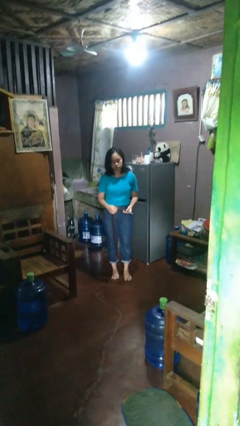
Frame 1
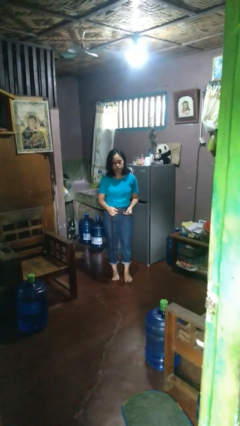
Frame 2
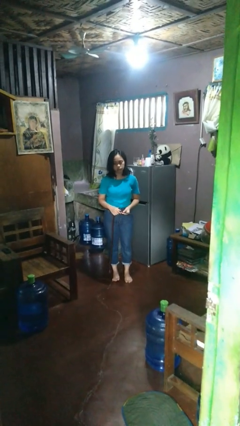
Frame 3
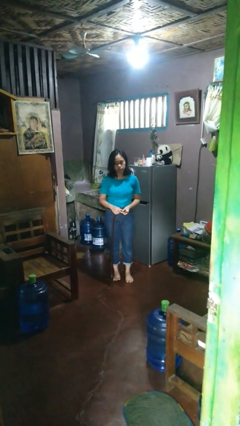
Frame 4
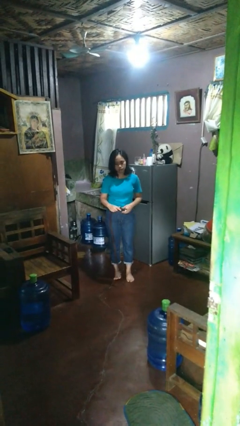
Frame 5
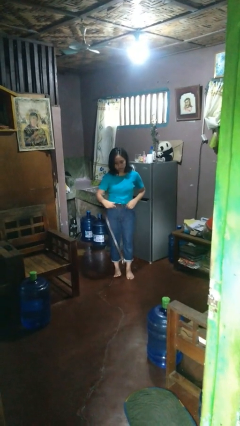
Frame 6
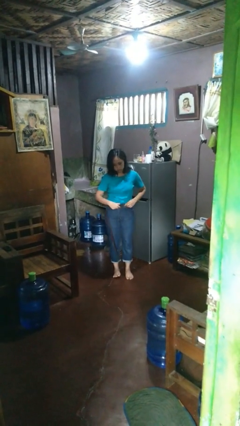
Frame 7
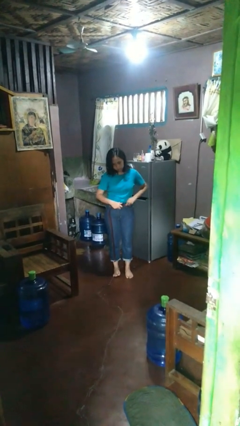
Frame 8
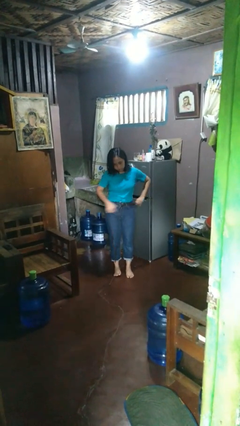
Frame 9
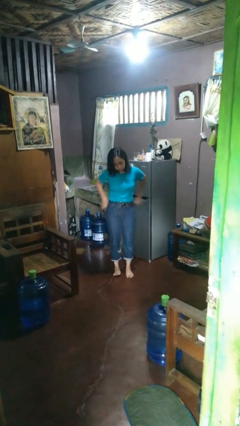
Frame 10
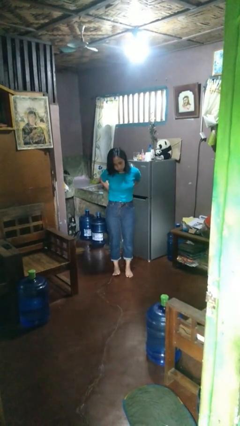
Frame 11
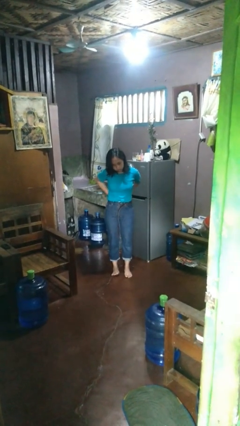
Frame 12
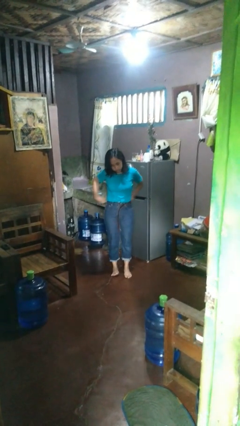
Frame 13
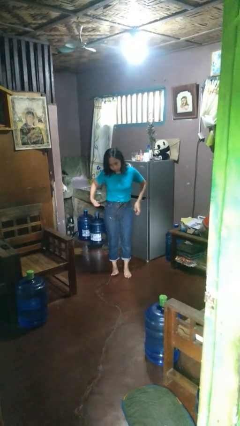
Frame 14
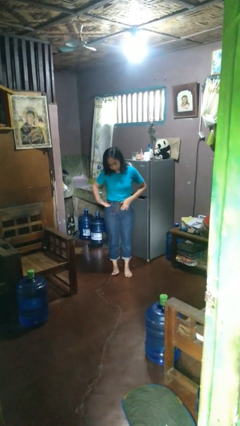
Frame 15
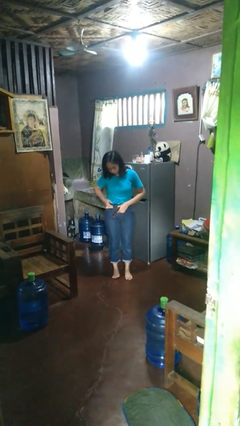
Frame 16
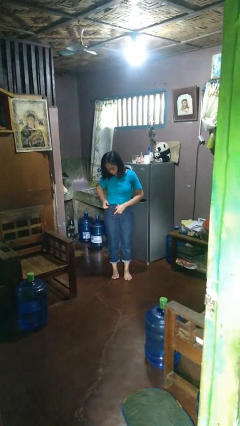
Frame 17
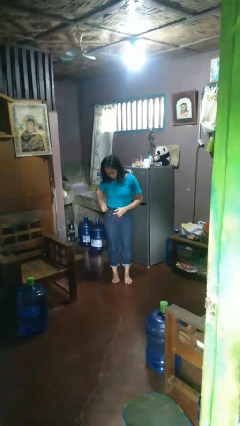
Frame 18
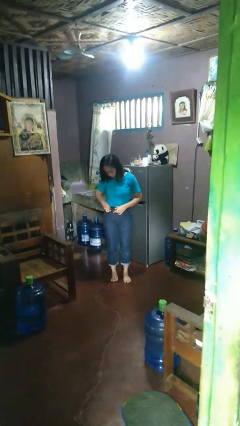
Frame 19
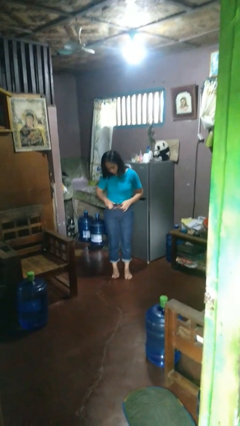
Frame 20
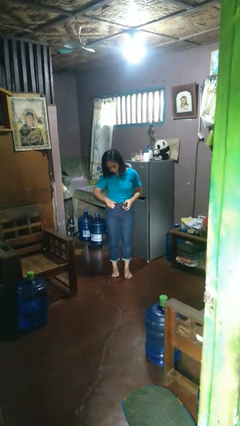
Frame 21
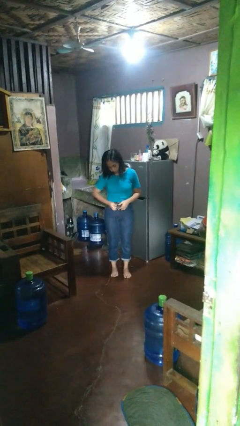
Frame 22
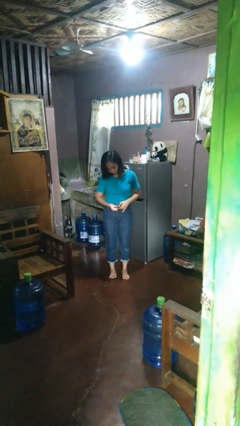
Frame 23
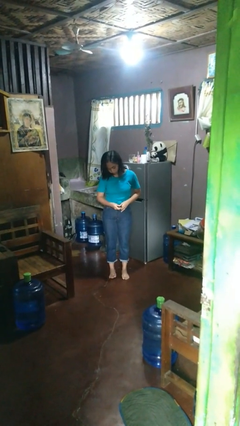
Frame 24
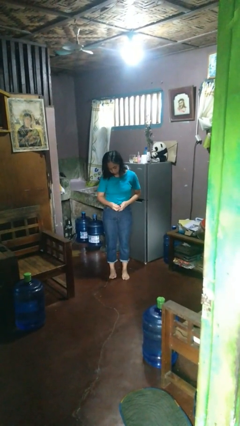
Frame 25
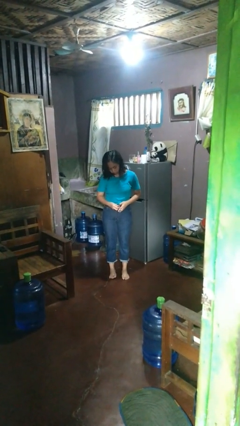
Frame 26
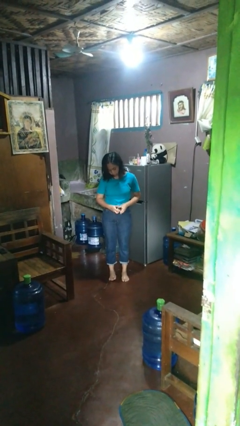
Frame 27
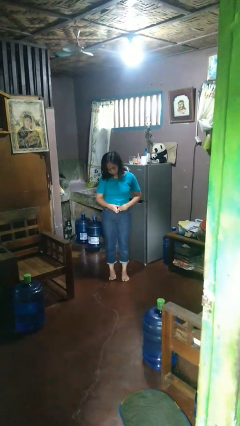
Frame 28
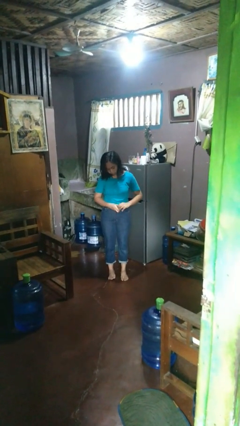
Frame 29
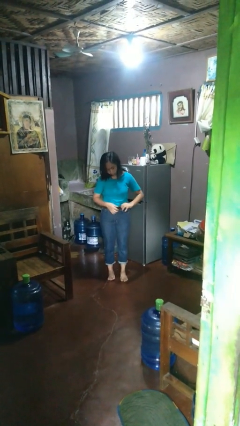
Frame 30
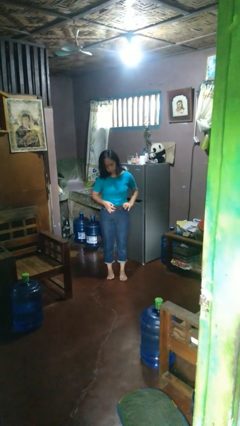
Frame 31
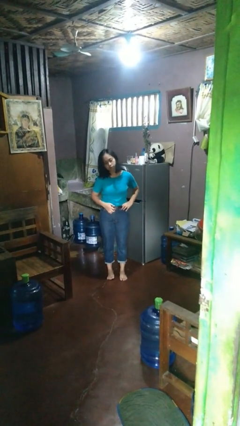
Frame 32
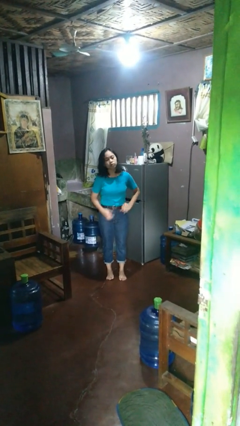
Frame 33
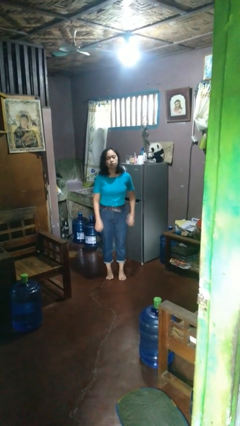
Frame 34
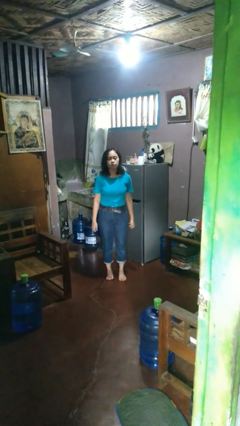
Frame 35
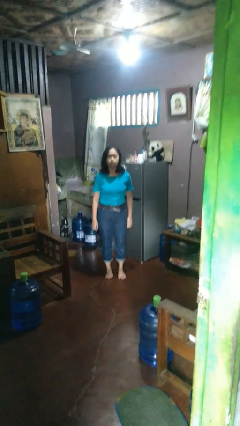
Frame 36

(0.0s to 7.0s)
person puts on belt

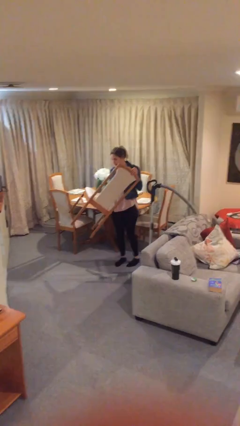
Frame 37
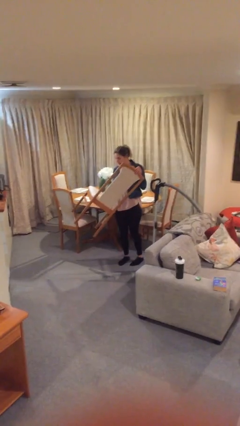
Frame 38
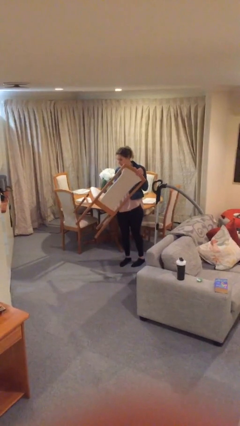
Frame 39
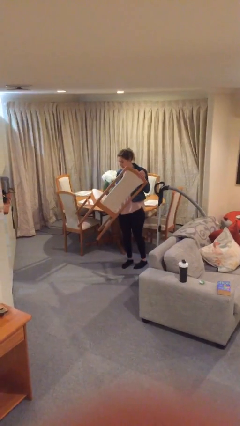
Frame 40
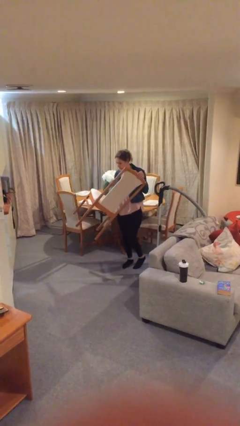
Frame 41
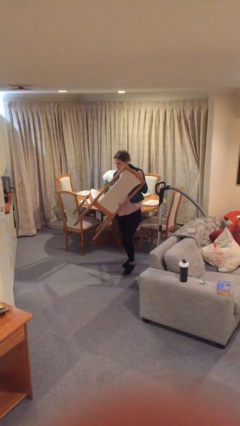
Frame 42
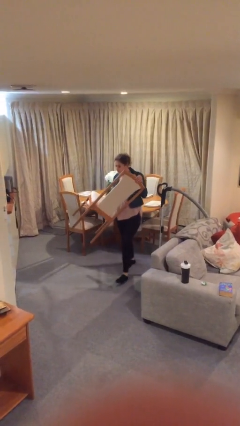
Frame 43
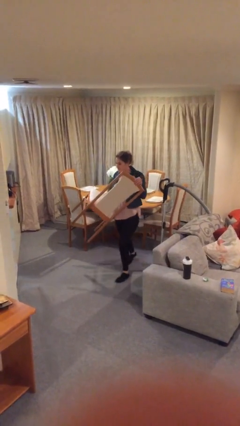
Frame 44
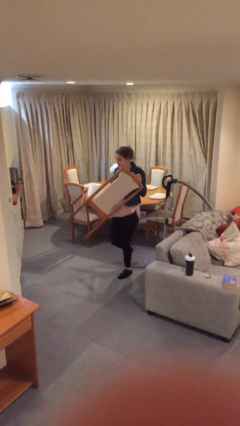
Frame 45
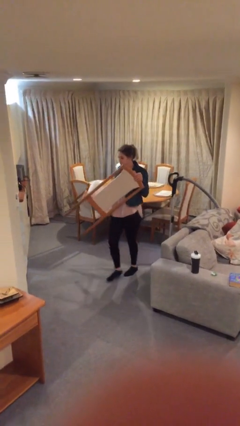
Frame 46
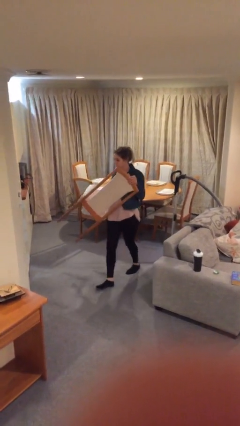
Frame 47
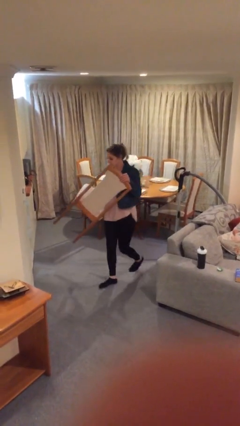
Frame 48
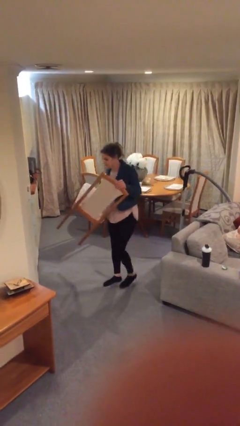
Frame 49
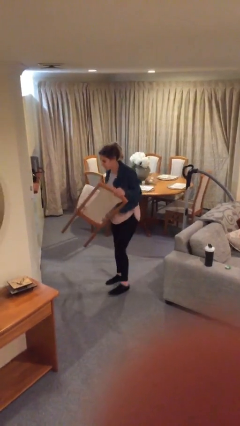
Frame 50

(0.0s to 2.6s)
person carries heavy object

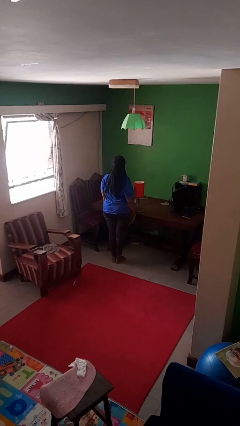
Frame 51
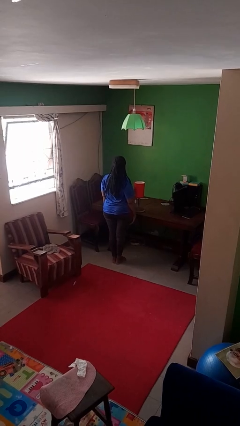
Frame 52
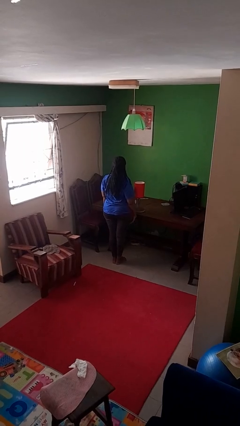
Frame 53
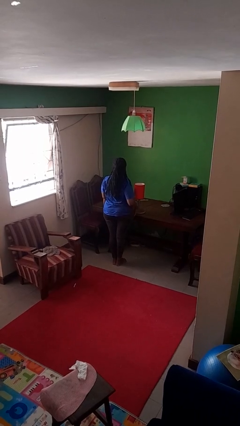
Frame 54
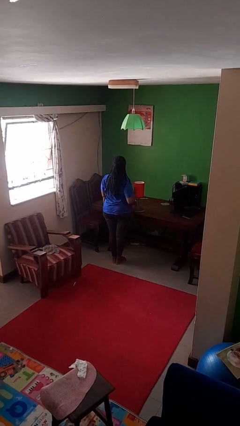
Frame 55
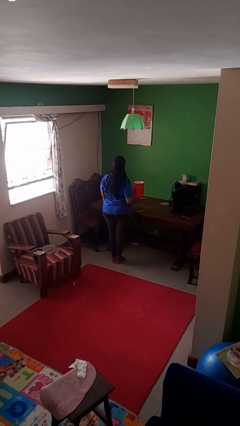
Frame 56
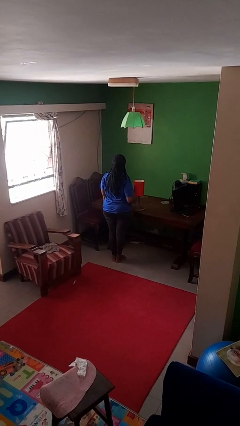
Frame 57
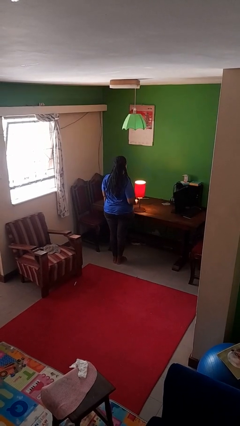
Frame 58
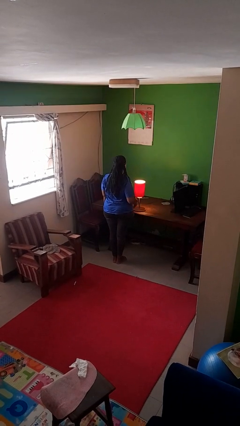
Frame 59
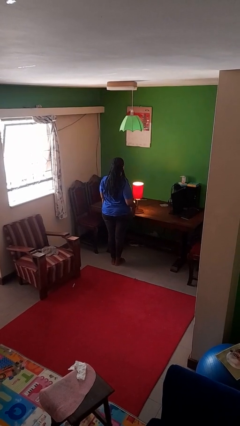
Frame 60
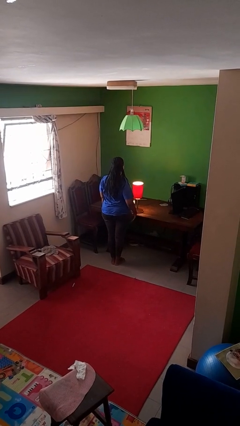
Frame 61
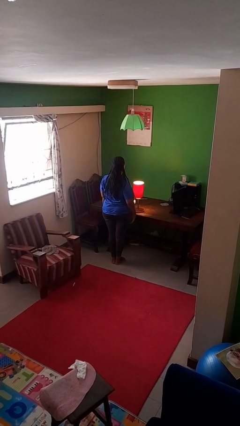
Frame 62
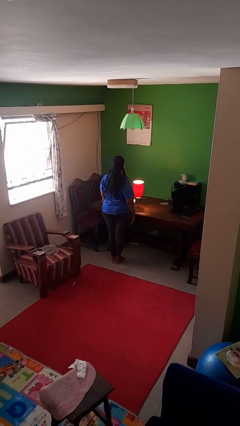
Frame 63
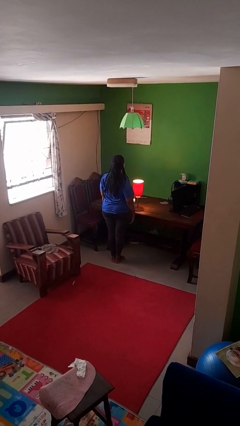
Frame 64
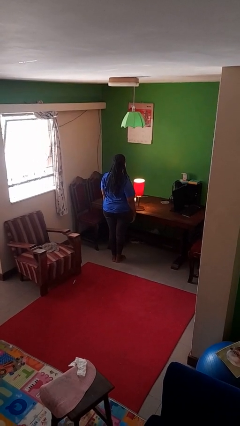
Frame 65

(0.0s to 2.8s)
person turns on lamp

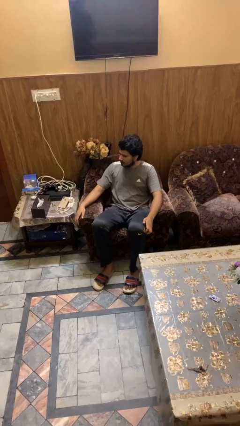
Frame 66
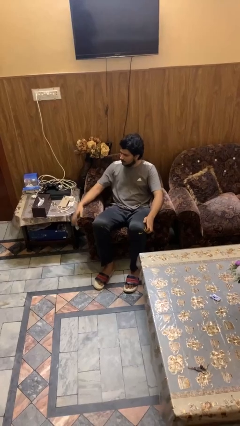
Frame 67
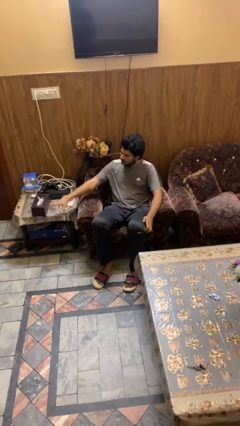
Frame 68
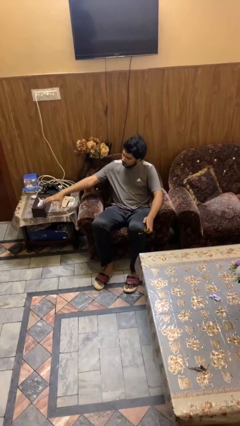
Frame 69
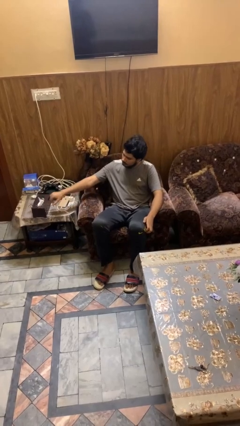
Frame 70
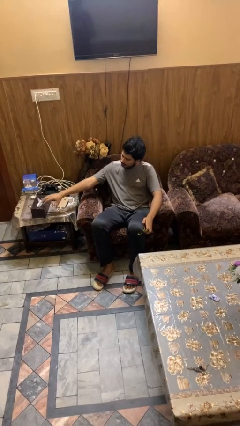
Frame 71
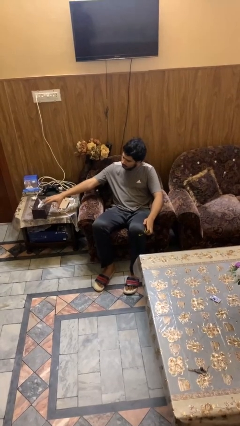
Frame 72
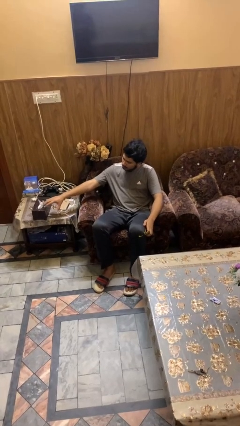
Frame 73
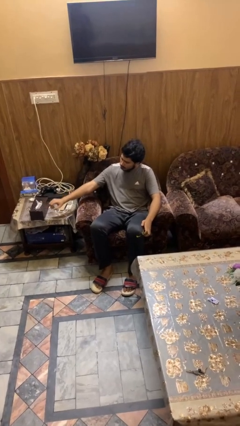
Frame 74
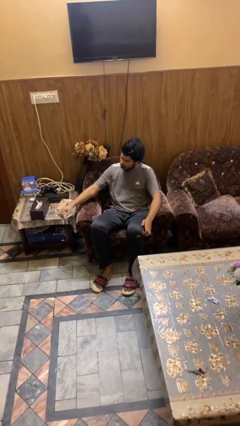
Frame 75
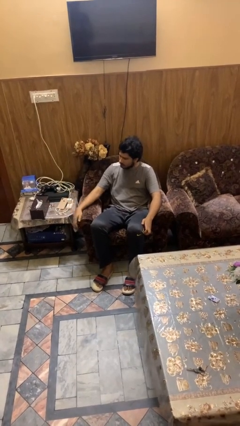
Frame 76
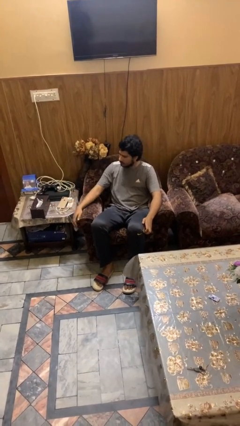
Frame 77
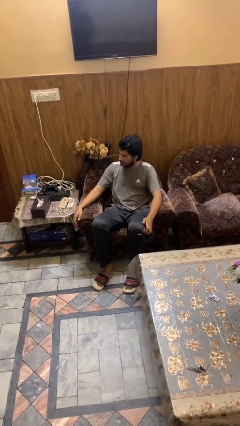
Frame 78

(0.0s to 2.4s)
person waves hand over object

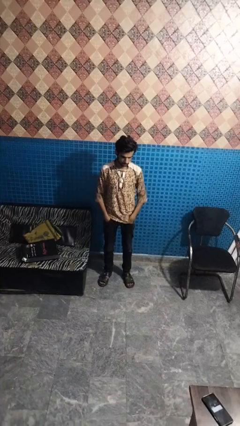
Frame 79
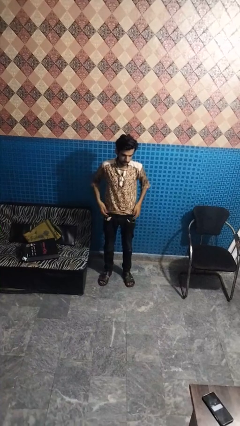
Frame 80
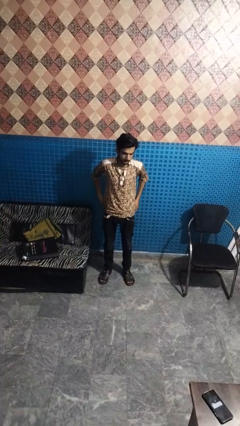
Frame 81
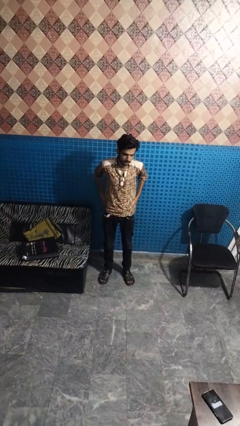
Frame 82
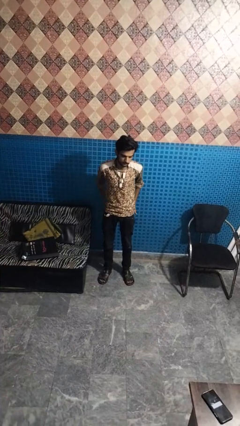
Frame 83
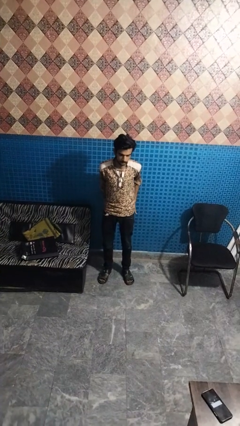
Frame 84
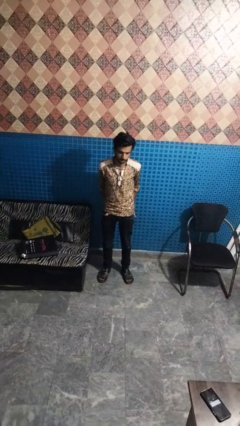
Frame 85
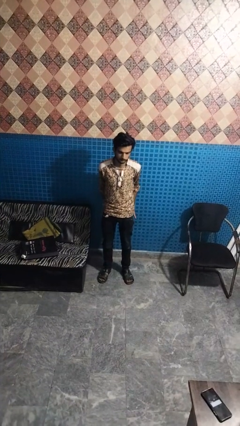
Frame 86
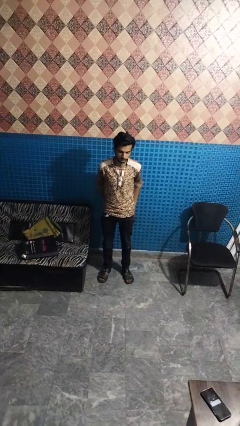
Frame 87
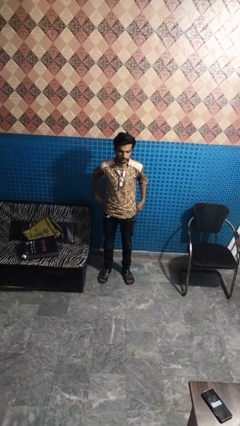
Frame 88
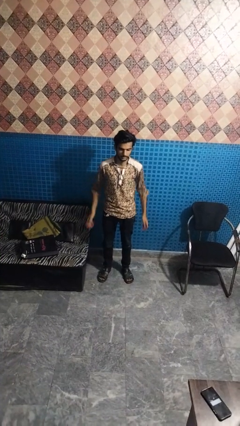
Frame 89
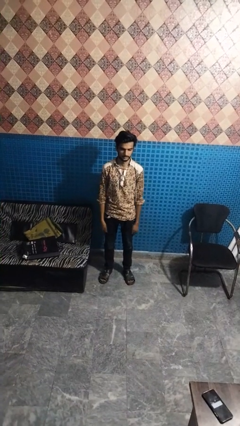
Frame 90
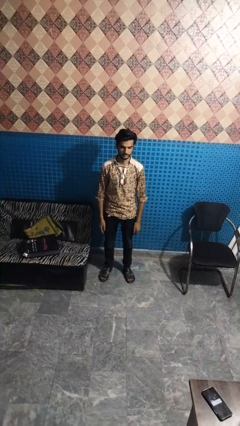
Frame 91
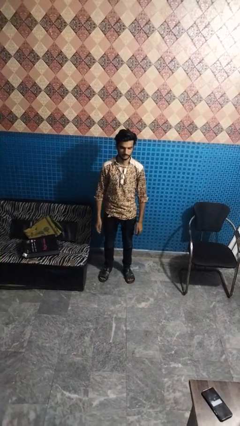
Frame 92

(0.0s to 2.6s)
person puts hands in back pockets

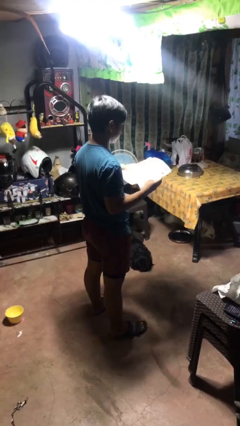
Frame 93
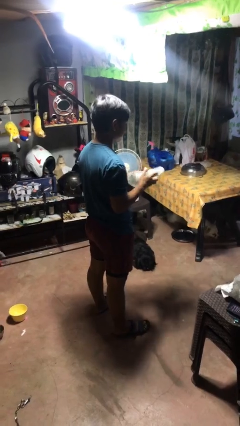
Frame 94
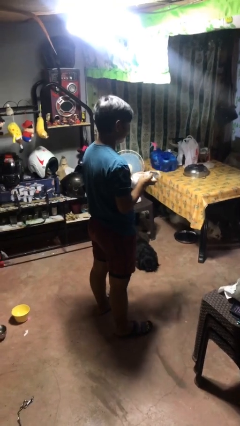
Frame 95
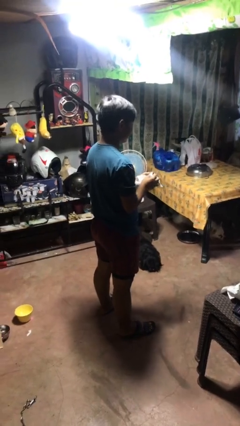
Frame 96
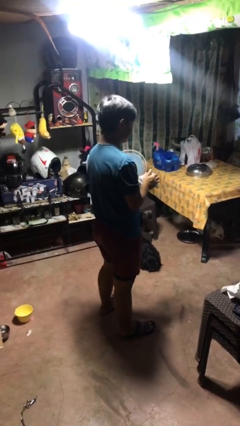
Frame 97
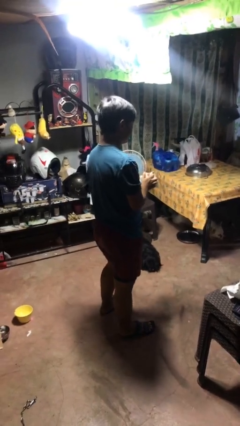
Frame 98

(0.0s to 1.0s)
person crumples paper
